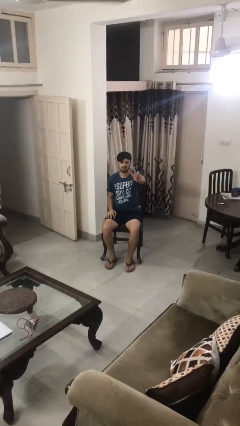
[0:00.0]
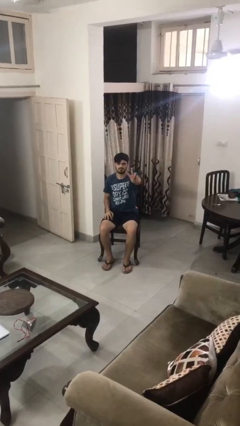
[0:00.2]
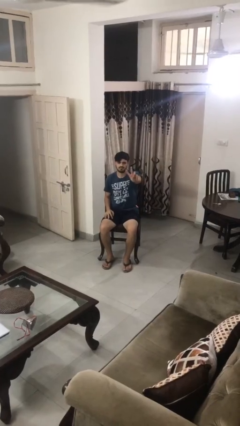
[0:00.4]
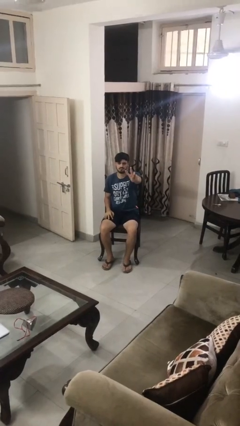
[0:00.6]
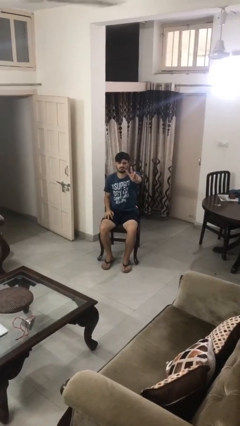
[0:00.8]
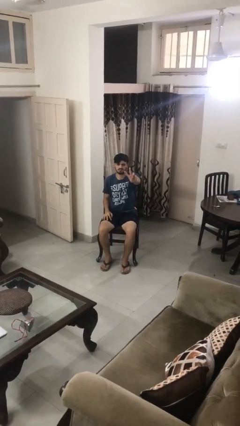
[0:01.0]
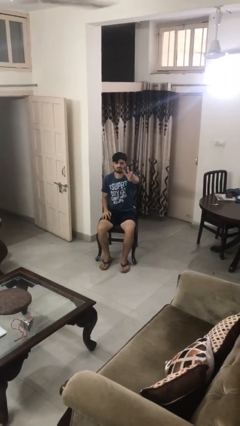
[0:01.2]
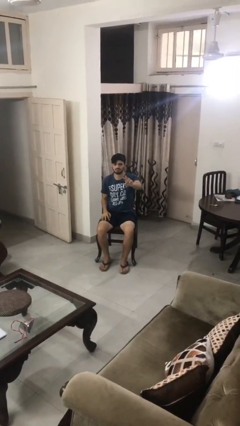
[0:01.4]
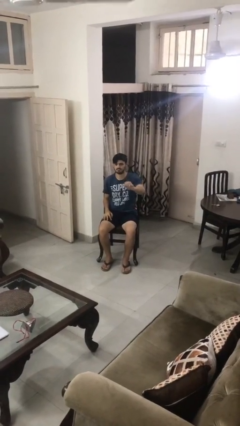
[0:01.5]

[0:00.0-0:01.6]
person gestures peace

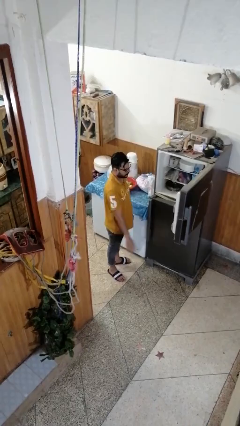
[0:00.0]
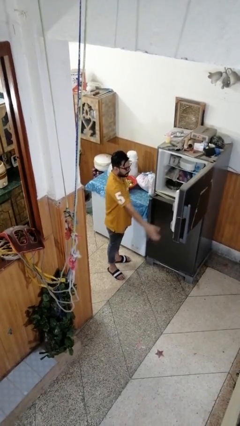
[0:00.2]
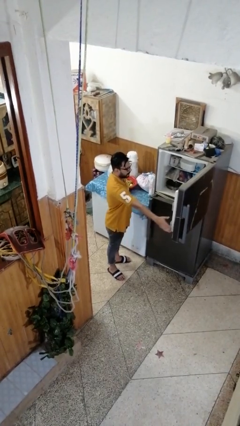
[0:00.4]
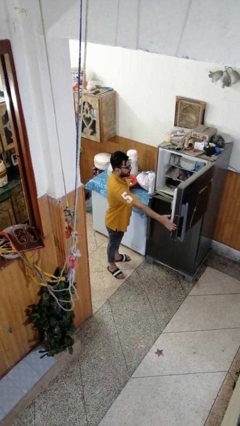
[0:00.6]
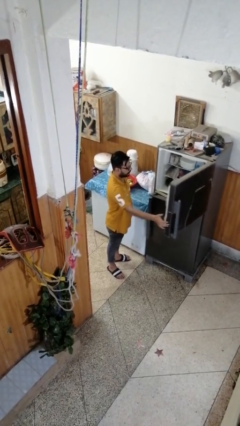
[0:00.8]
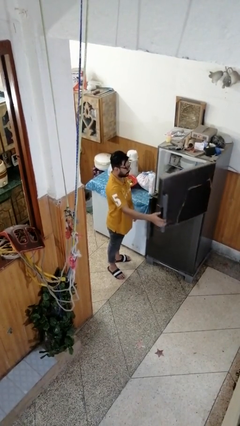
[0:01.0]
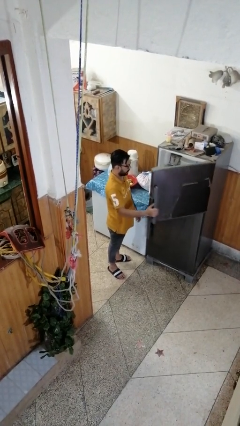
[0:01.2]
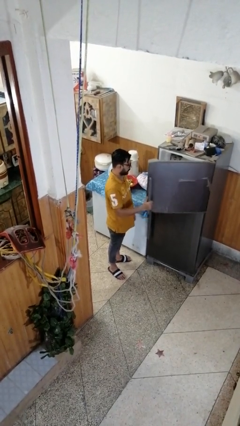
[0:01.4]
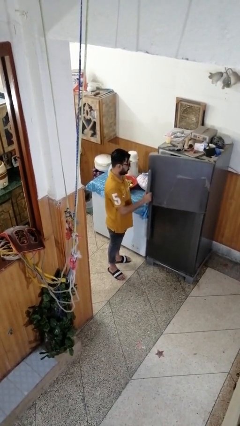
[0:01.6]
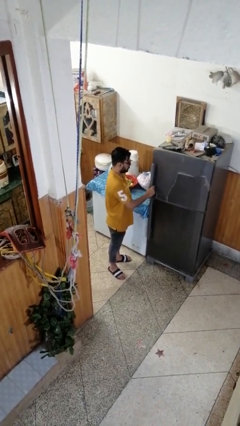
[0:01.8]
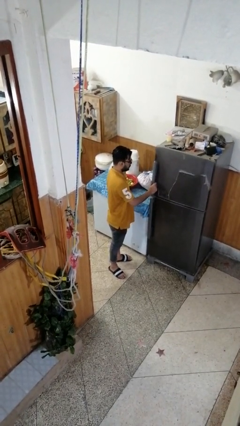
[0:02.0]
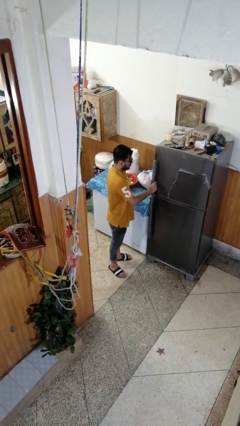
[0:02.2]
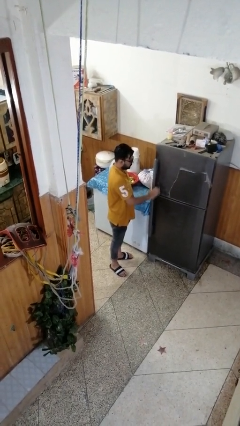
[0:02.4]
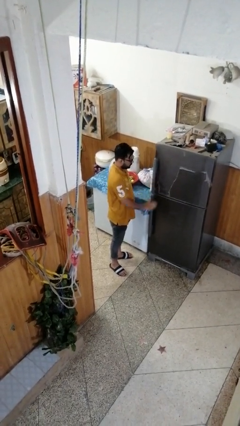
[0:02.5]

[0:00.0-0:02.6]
person closes refrigerator

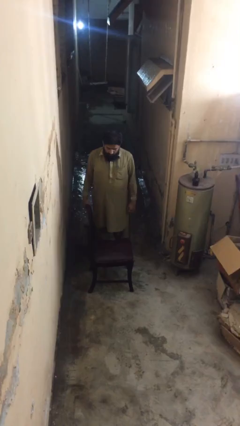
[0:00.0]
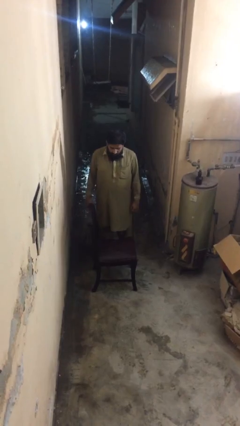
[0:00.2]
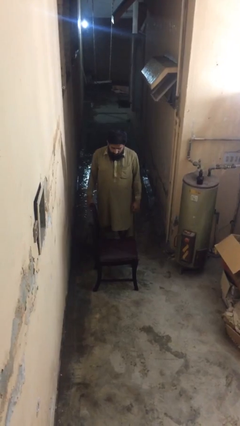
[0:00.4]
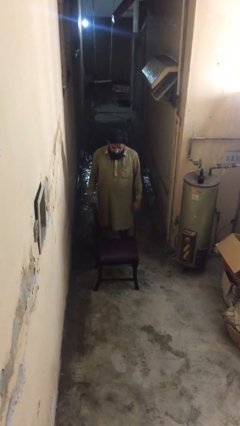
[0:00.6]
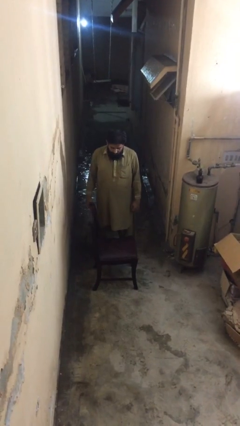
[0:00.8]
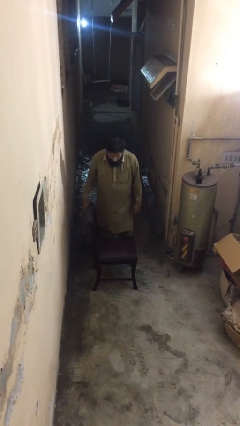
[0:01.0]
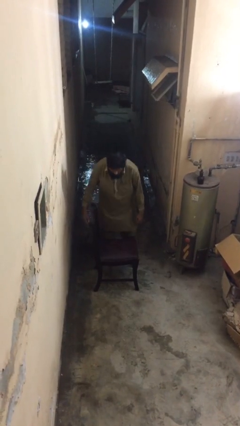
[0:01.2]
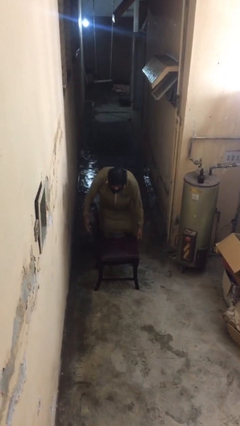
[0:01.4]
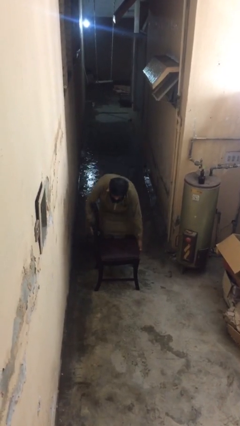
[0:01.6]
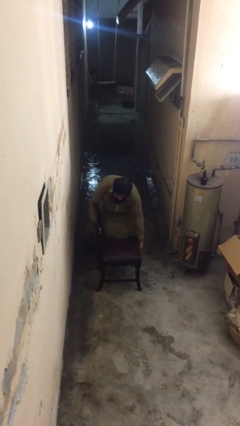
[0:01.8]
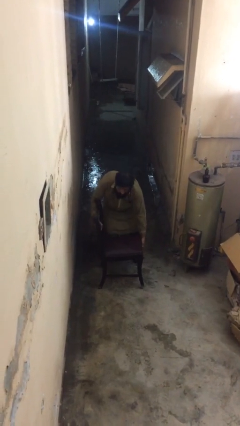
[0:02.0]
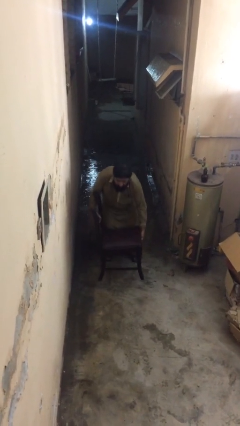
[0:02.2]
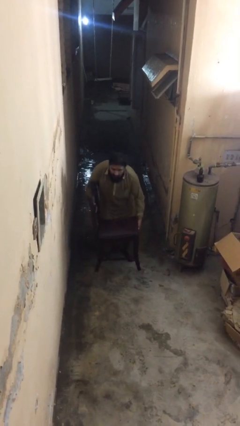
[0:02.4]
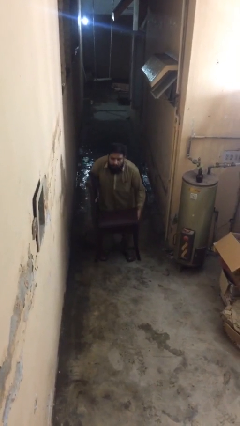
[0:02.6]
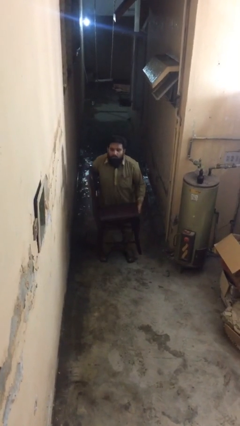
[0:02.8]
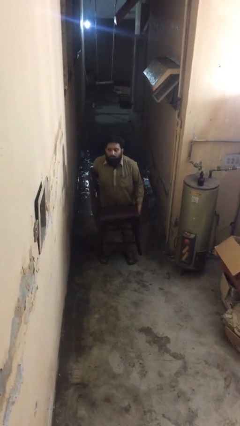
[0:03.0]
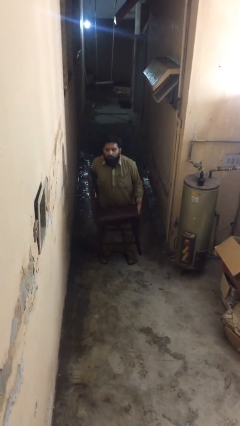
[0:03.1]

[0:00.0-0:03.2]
person picks up object from floor

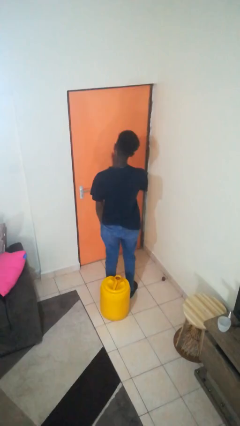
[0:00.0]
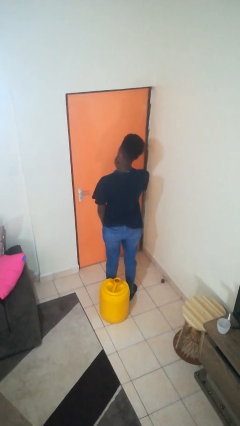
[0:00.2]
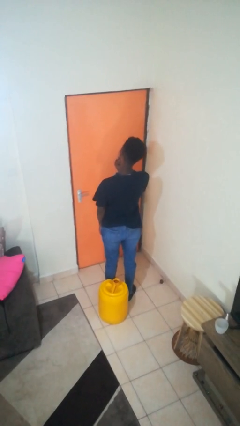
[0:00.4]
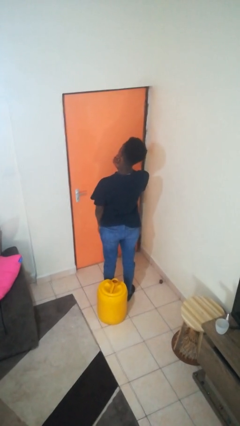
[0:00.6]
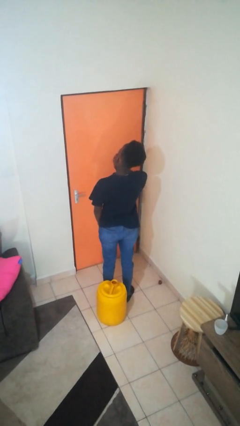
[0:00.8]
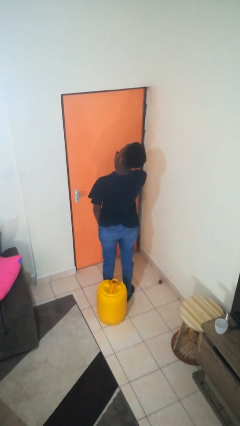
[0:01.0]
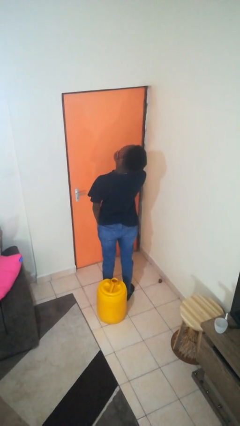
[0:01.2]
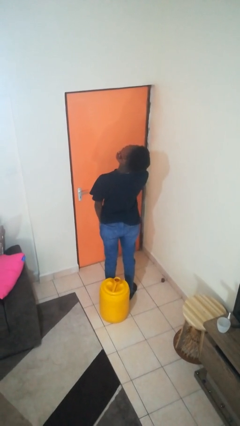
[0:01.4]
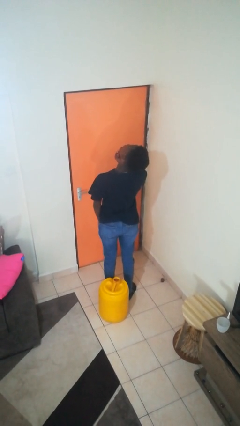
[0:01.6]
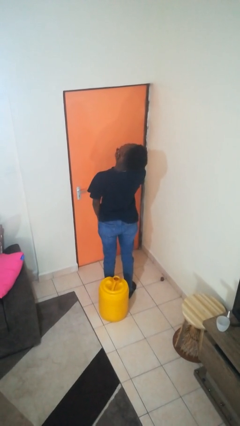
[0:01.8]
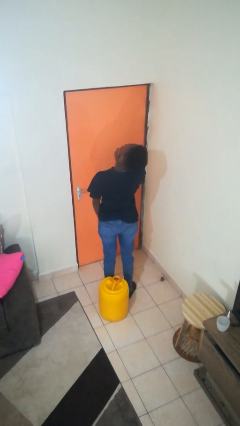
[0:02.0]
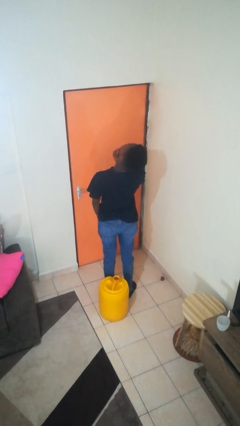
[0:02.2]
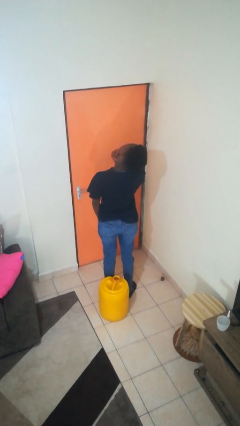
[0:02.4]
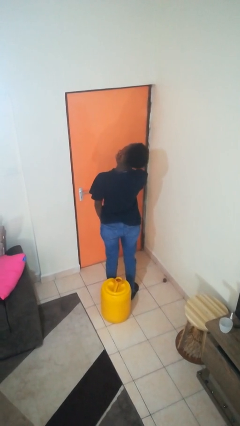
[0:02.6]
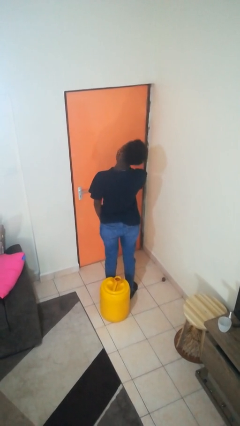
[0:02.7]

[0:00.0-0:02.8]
person strokes chin

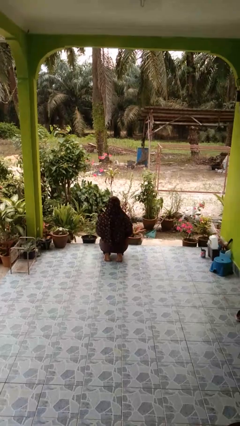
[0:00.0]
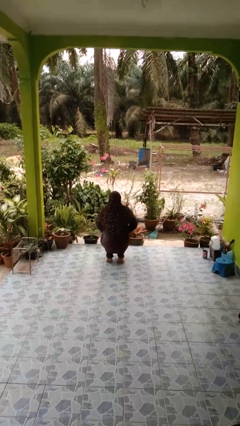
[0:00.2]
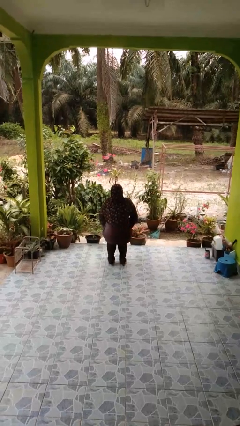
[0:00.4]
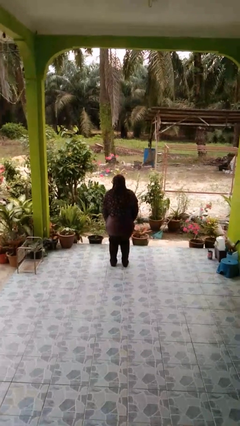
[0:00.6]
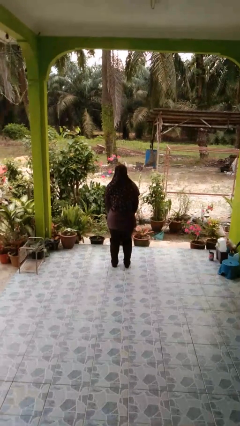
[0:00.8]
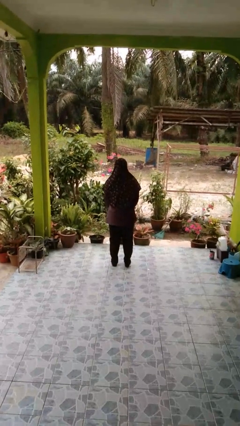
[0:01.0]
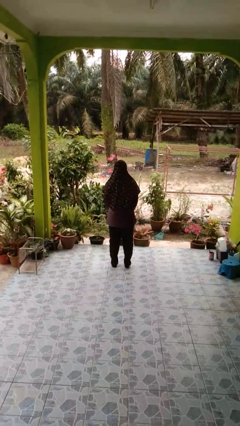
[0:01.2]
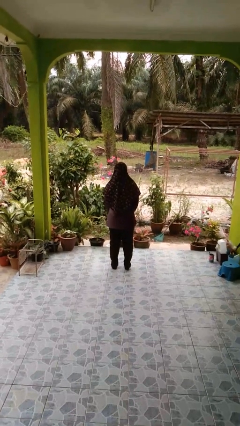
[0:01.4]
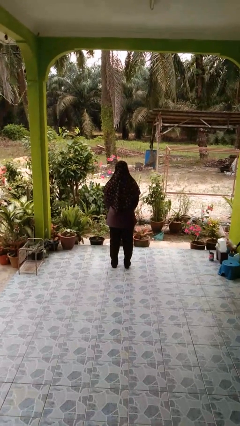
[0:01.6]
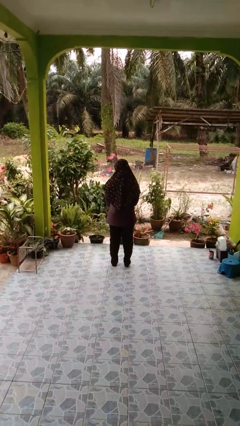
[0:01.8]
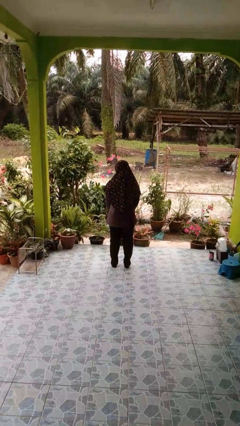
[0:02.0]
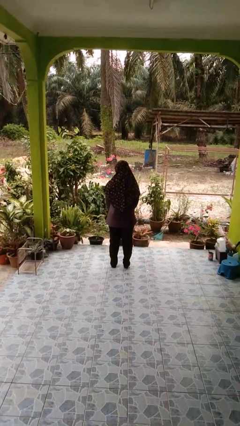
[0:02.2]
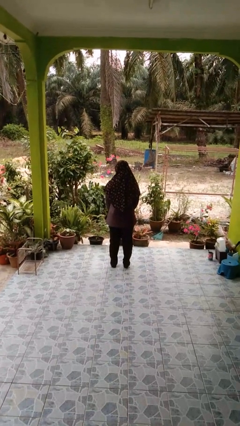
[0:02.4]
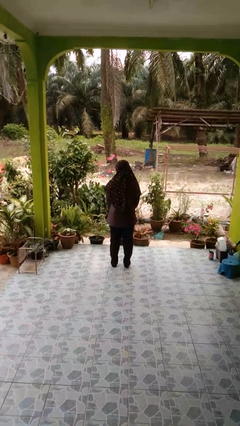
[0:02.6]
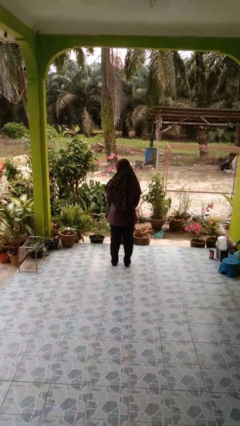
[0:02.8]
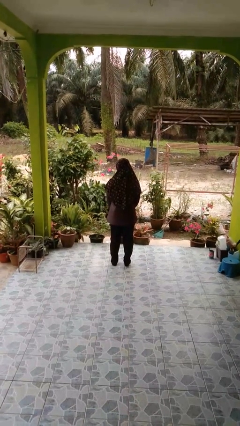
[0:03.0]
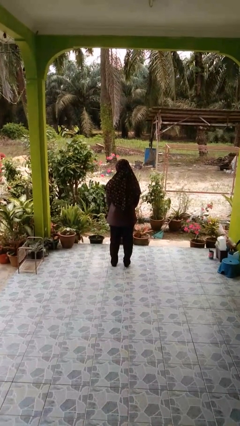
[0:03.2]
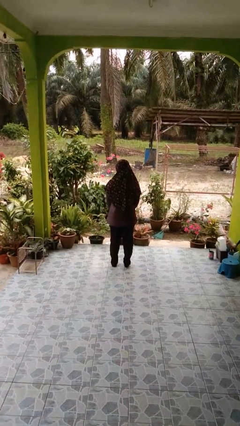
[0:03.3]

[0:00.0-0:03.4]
person stands up from floor

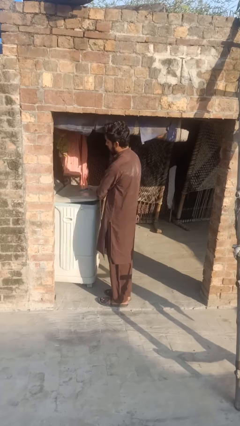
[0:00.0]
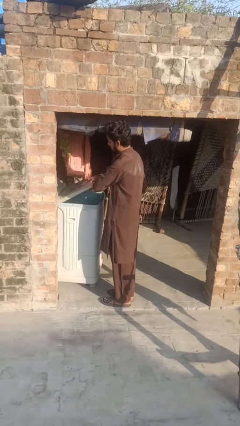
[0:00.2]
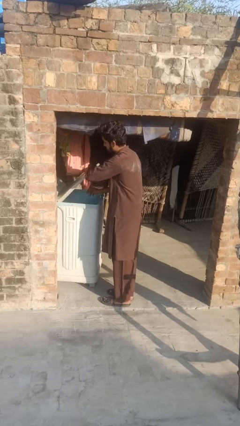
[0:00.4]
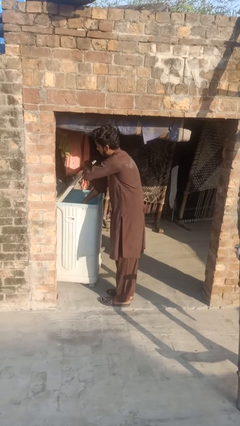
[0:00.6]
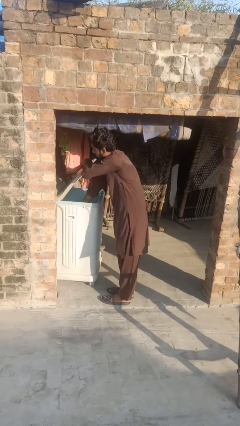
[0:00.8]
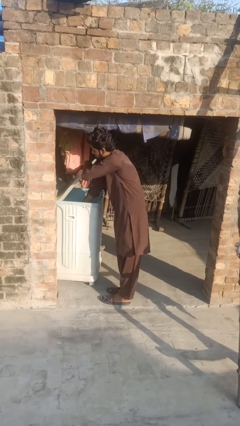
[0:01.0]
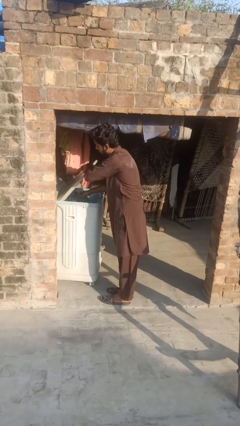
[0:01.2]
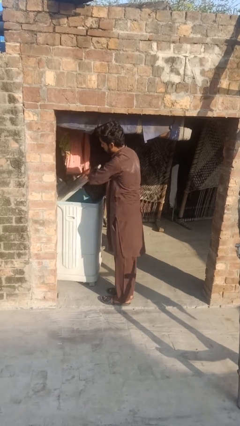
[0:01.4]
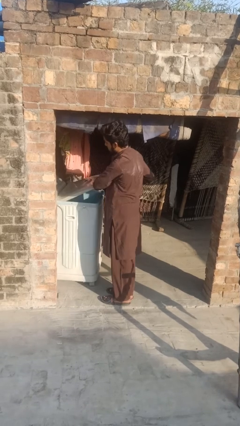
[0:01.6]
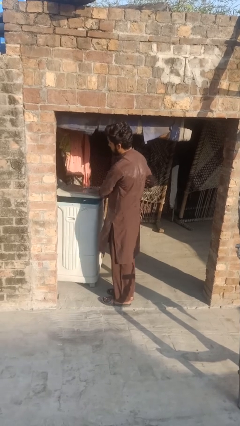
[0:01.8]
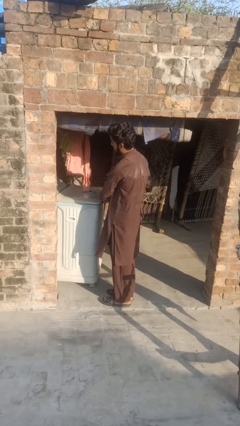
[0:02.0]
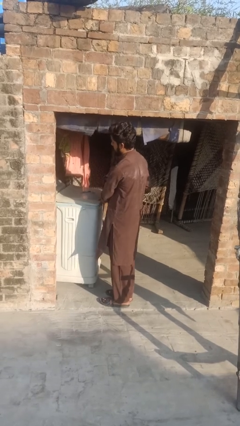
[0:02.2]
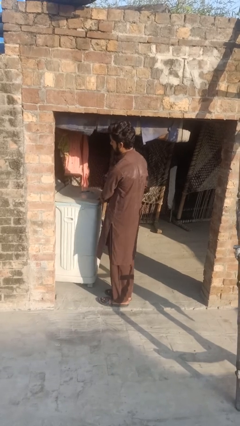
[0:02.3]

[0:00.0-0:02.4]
person unloads dryer

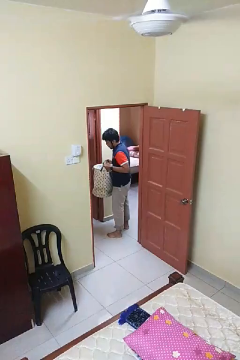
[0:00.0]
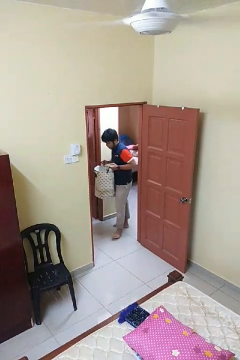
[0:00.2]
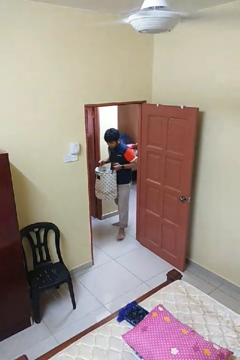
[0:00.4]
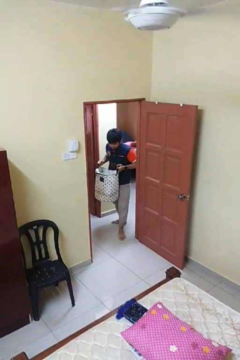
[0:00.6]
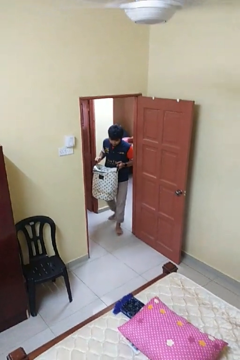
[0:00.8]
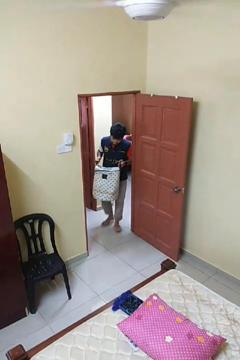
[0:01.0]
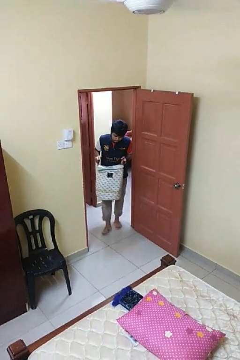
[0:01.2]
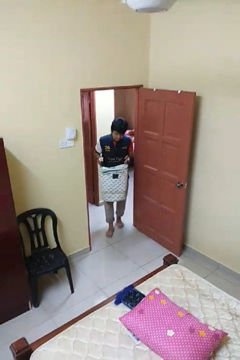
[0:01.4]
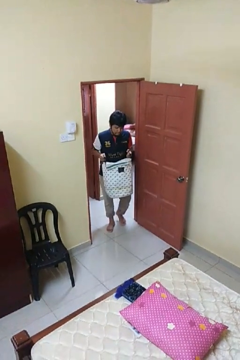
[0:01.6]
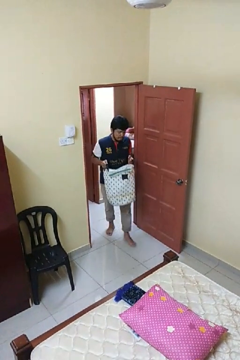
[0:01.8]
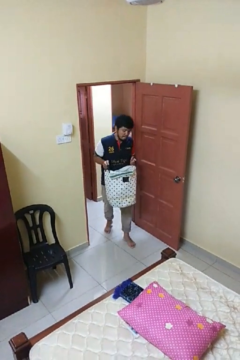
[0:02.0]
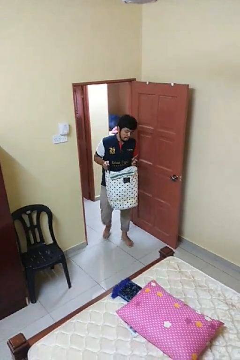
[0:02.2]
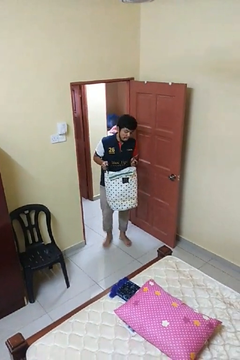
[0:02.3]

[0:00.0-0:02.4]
person carries laundry basket
